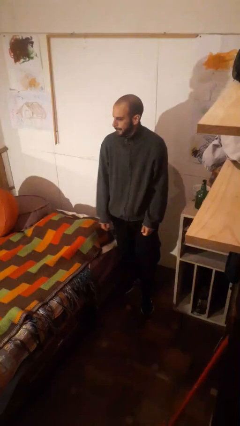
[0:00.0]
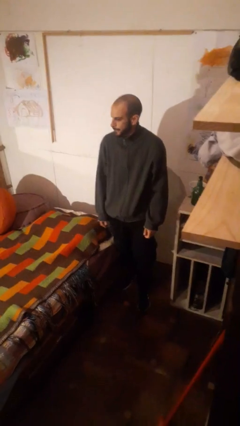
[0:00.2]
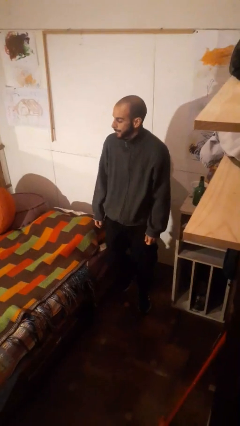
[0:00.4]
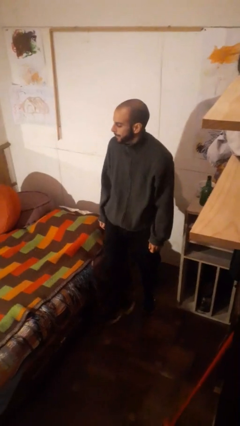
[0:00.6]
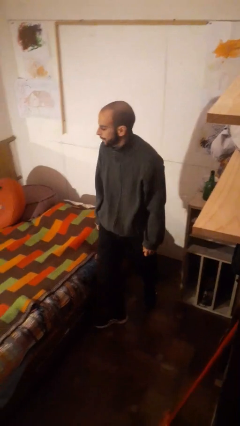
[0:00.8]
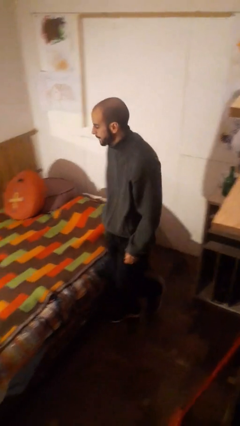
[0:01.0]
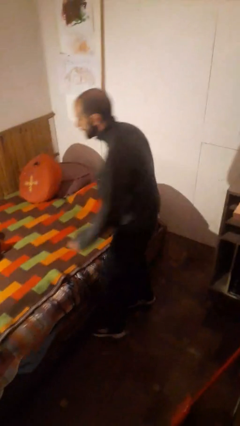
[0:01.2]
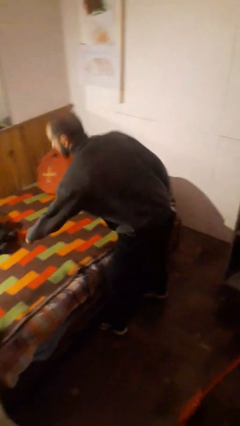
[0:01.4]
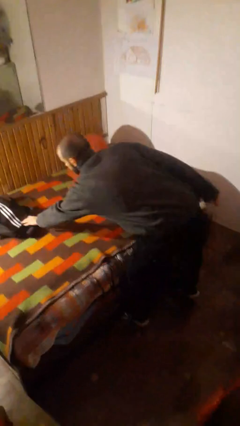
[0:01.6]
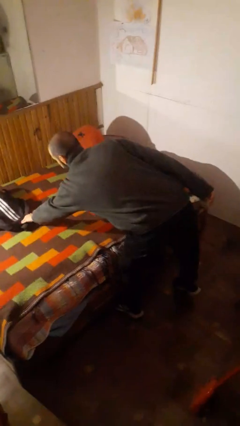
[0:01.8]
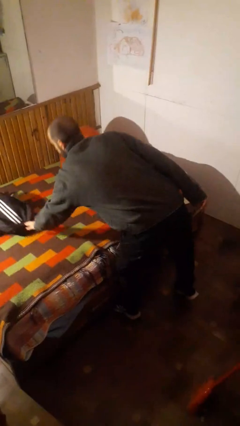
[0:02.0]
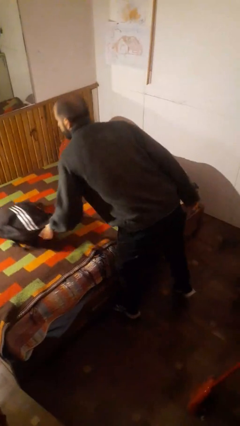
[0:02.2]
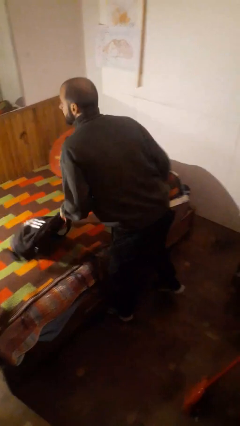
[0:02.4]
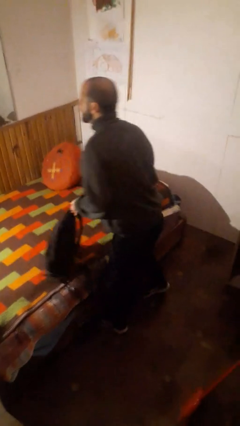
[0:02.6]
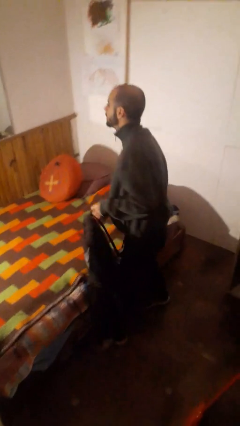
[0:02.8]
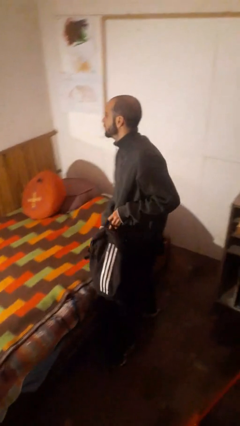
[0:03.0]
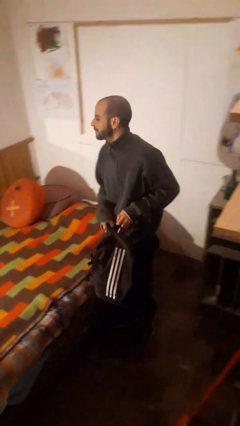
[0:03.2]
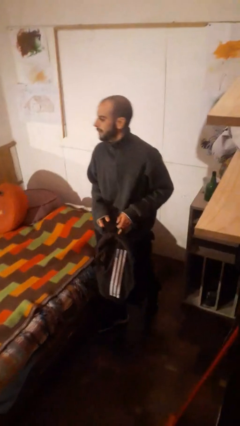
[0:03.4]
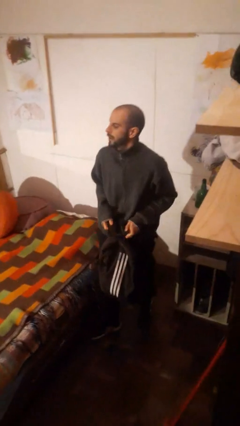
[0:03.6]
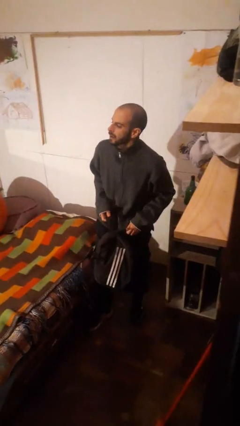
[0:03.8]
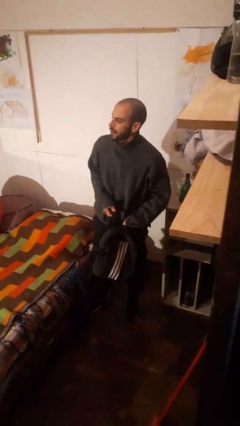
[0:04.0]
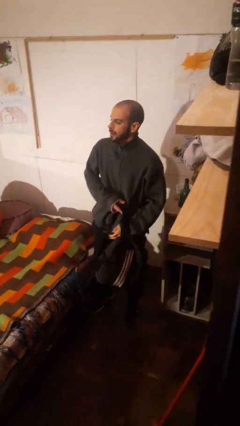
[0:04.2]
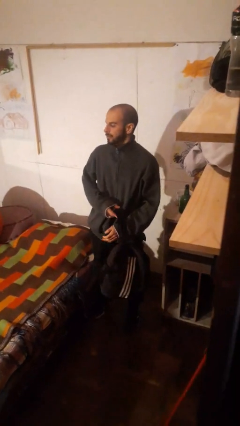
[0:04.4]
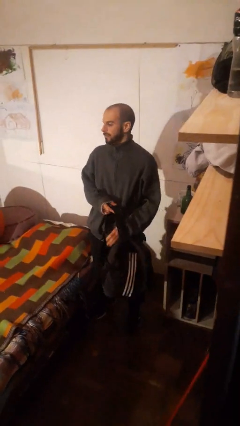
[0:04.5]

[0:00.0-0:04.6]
person picks up object from bed

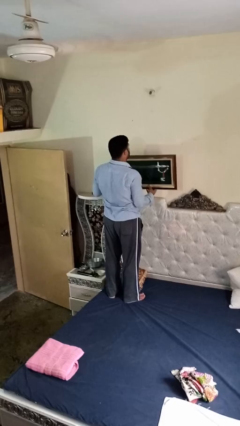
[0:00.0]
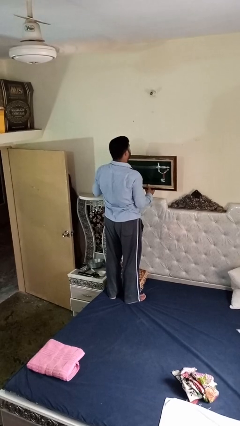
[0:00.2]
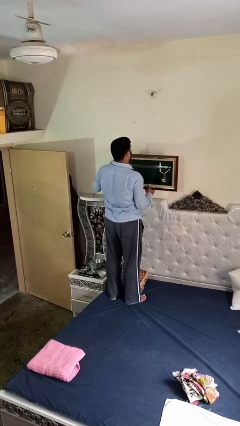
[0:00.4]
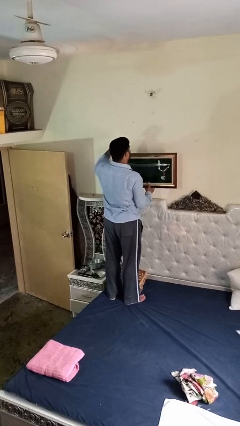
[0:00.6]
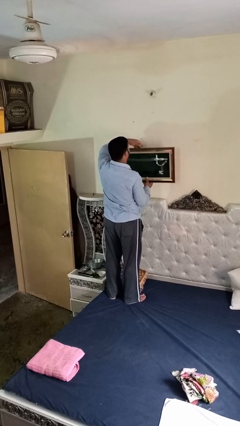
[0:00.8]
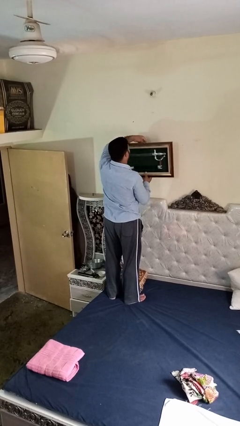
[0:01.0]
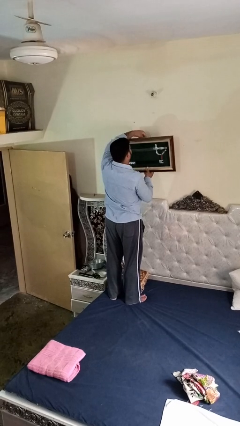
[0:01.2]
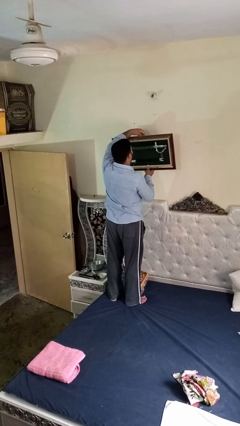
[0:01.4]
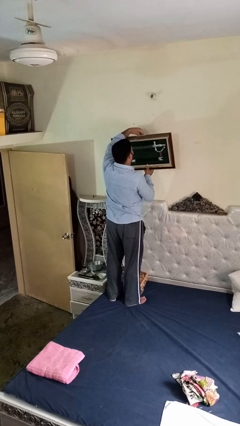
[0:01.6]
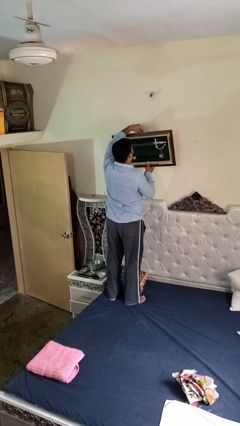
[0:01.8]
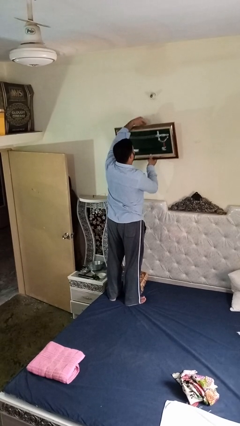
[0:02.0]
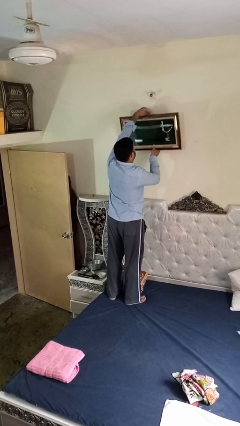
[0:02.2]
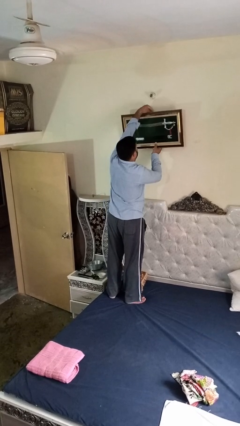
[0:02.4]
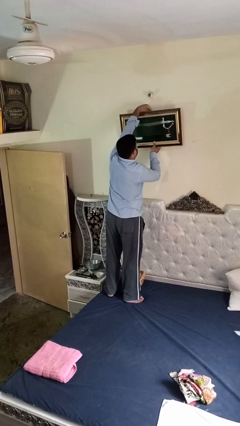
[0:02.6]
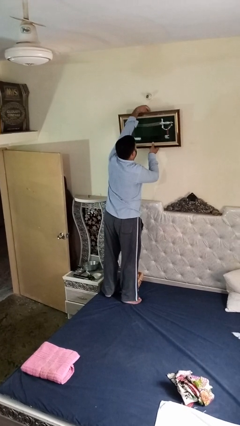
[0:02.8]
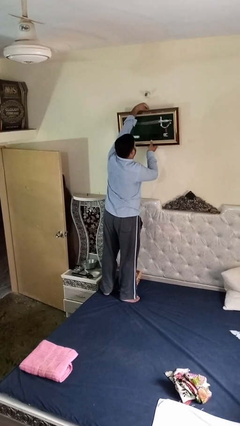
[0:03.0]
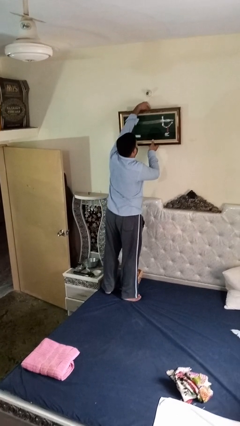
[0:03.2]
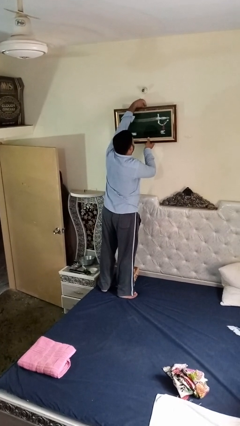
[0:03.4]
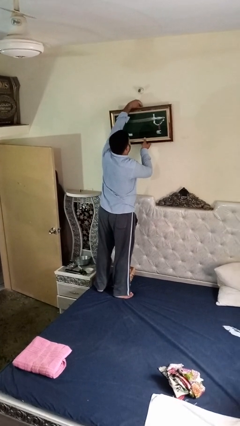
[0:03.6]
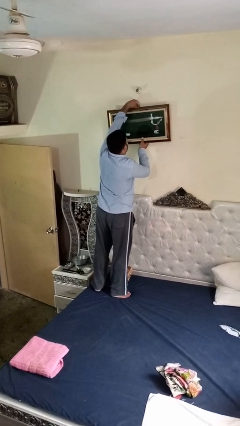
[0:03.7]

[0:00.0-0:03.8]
person puts up picture frame

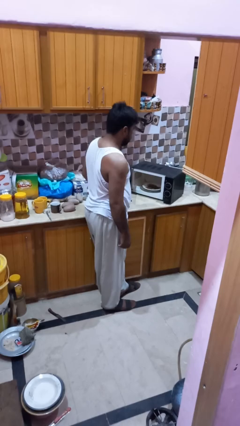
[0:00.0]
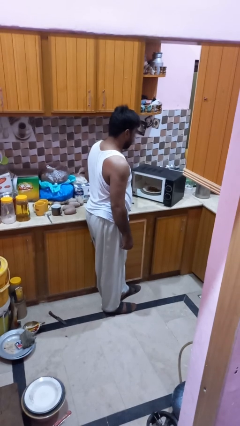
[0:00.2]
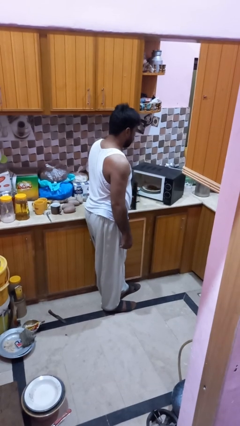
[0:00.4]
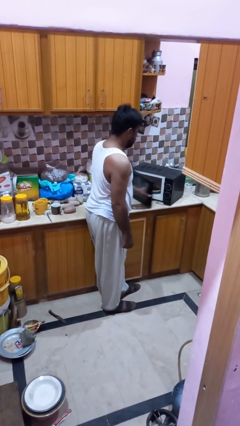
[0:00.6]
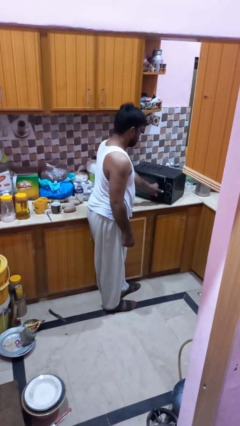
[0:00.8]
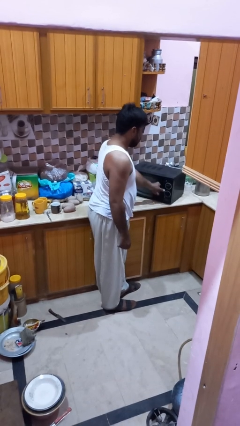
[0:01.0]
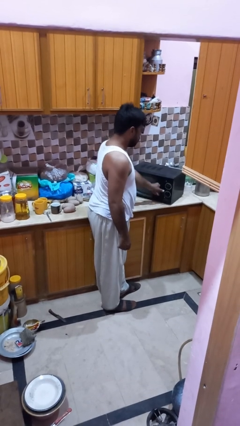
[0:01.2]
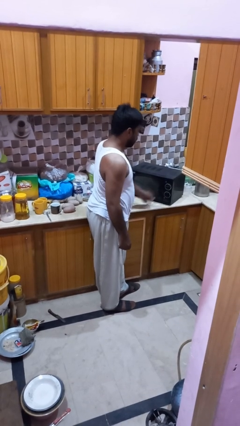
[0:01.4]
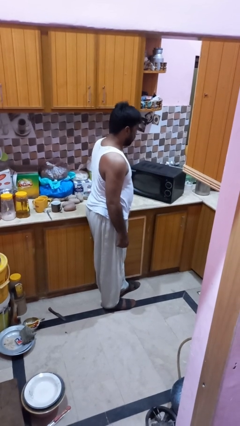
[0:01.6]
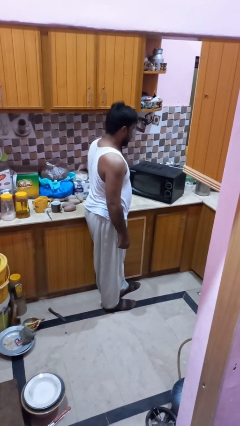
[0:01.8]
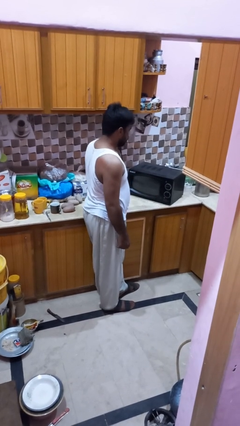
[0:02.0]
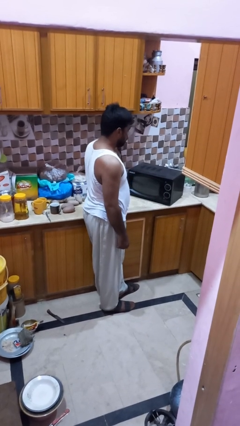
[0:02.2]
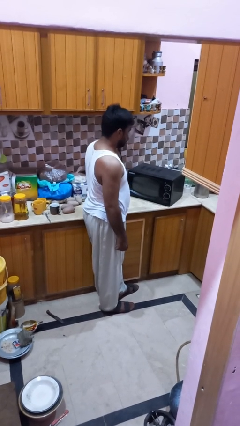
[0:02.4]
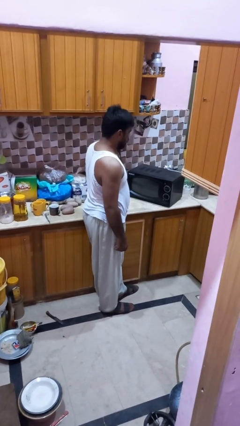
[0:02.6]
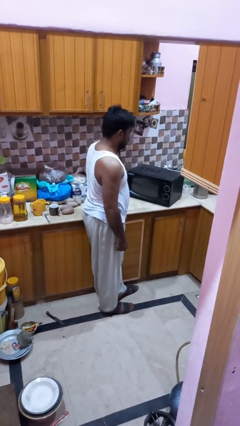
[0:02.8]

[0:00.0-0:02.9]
person closes microwave

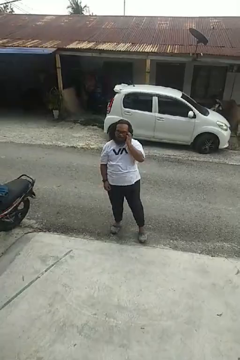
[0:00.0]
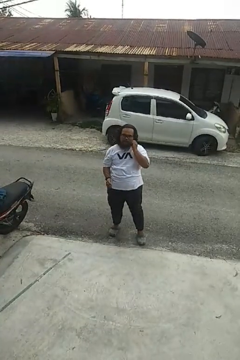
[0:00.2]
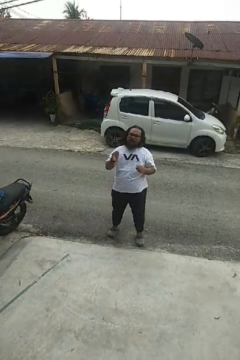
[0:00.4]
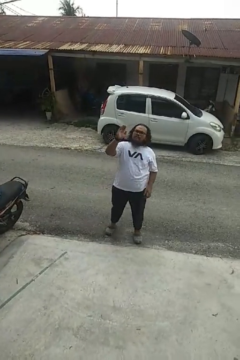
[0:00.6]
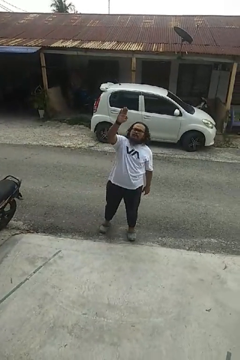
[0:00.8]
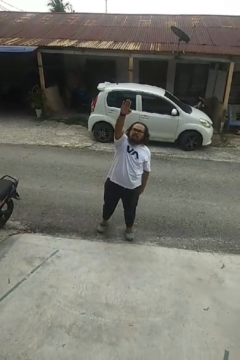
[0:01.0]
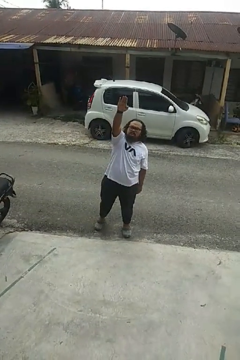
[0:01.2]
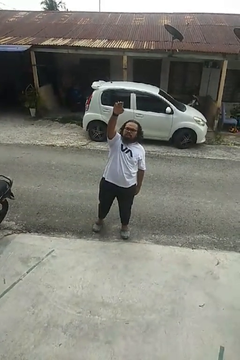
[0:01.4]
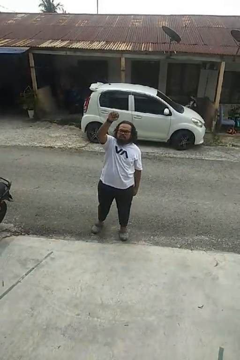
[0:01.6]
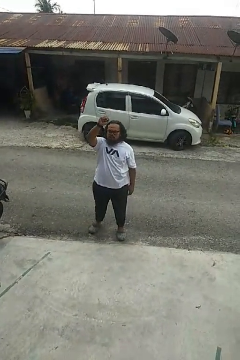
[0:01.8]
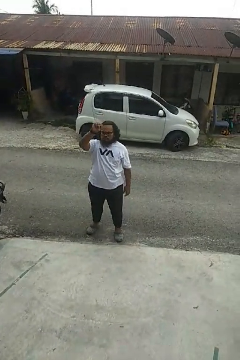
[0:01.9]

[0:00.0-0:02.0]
person gestures raise hand

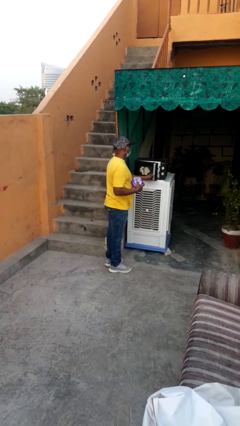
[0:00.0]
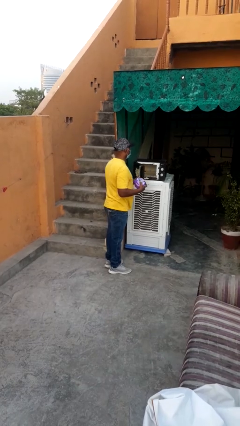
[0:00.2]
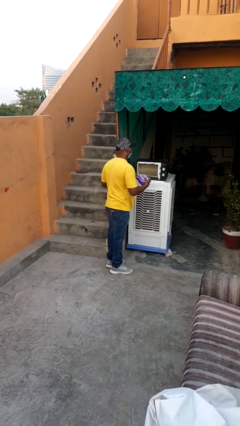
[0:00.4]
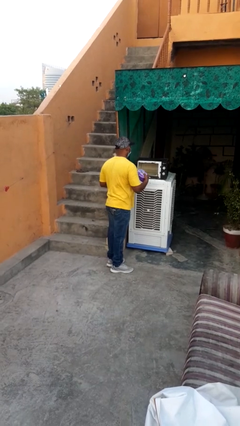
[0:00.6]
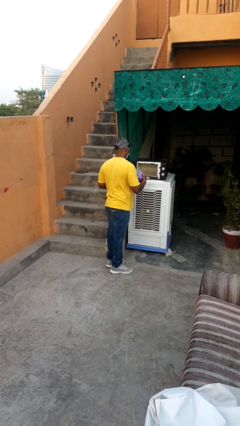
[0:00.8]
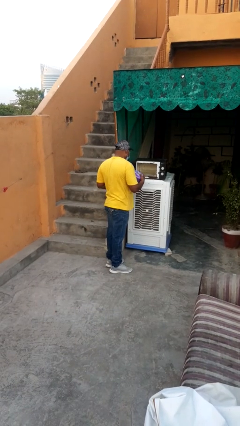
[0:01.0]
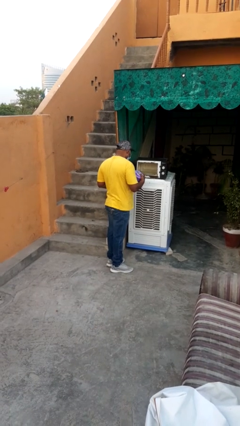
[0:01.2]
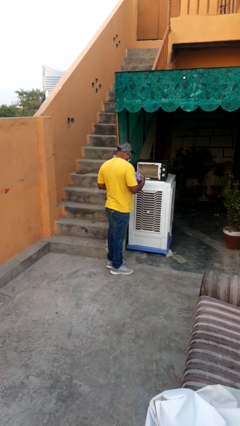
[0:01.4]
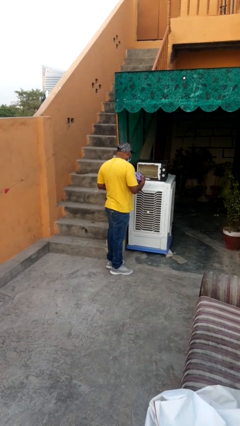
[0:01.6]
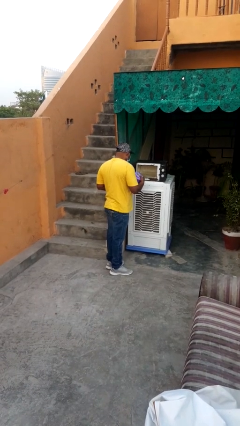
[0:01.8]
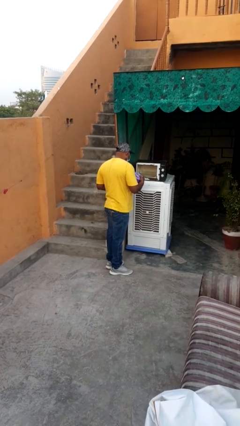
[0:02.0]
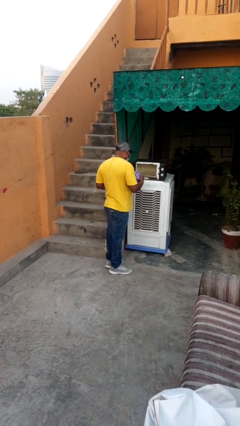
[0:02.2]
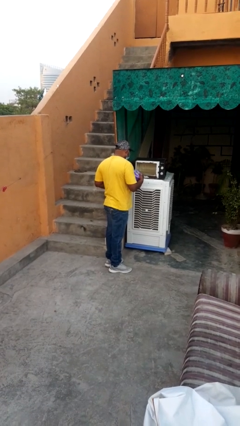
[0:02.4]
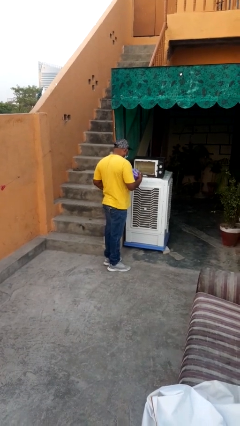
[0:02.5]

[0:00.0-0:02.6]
person opens microwave

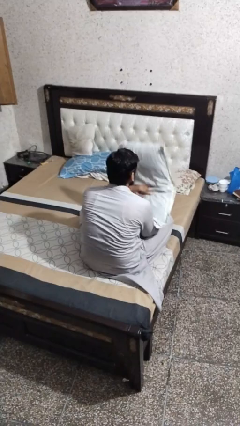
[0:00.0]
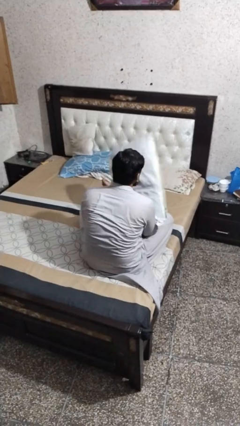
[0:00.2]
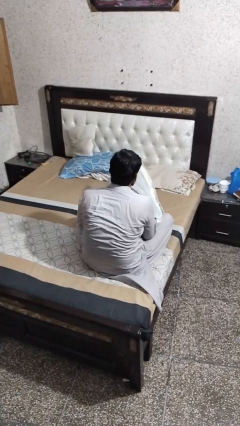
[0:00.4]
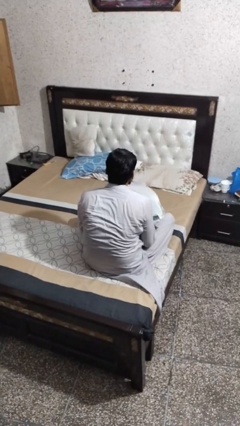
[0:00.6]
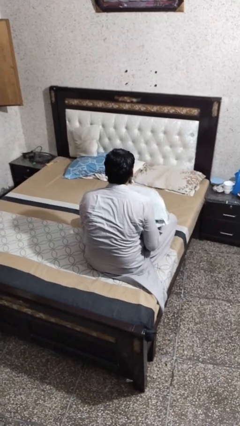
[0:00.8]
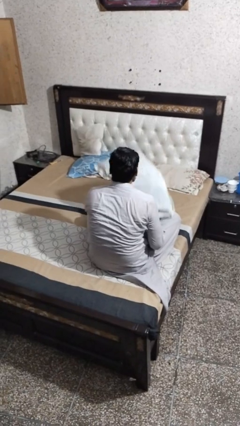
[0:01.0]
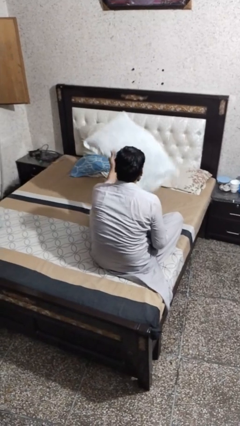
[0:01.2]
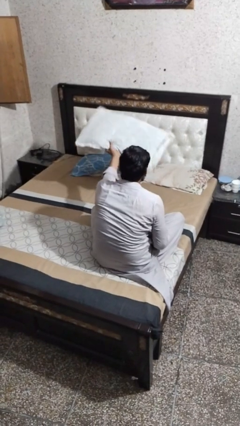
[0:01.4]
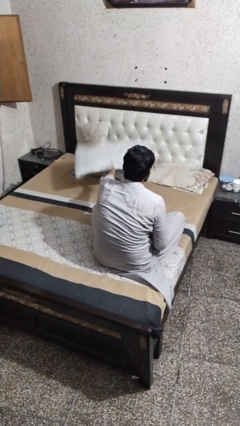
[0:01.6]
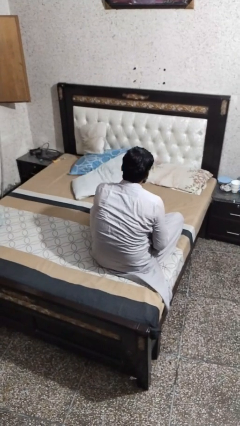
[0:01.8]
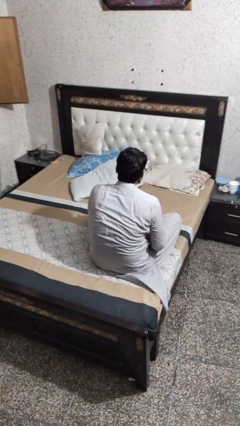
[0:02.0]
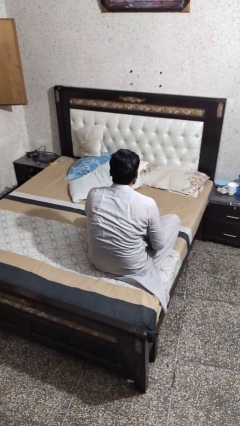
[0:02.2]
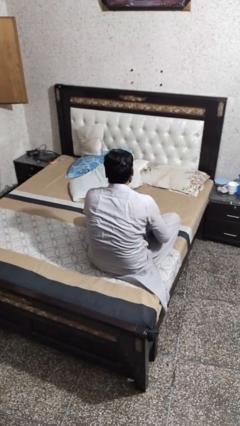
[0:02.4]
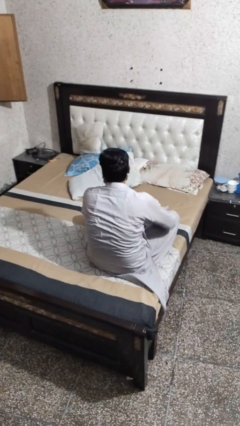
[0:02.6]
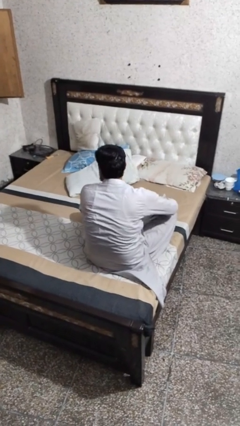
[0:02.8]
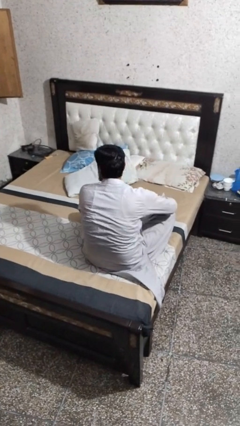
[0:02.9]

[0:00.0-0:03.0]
person puts down object on bed
